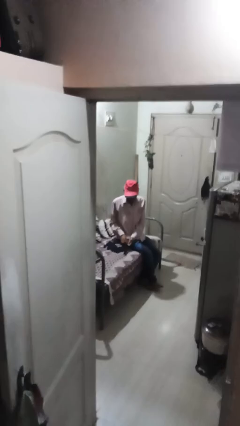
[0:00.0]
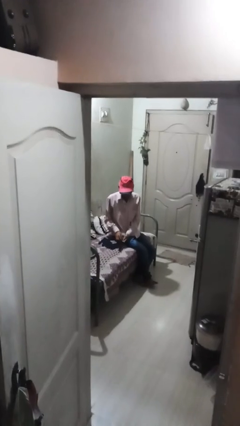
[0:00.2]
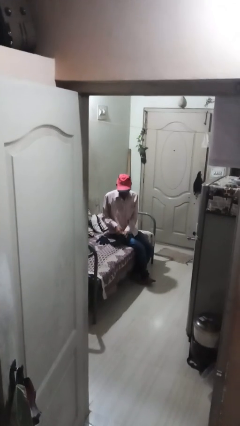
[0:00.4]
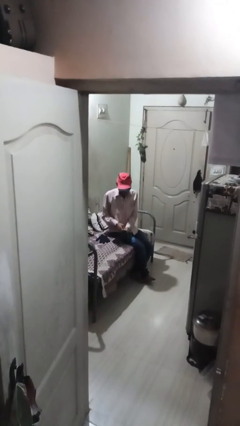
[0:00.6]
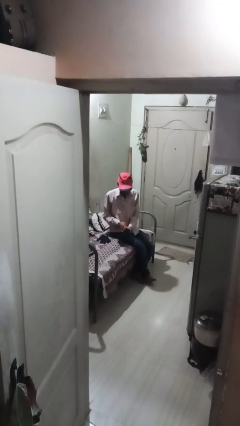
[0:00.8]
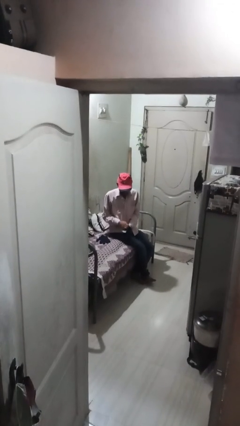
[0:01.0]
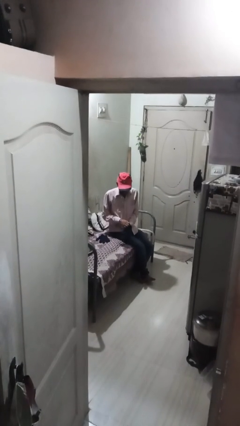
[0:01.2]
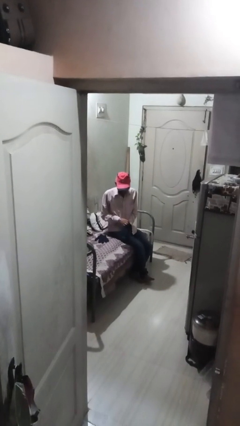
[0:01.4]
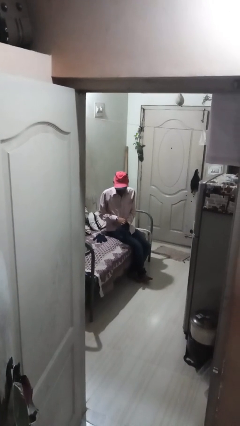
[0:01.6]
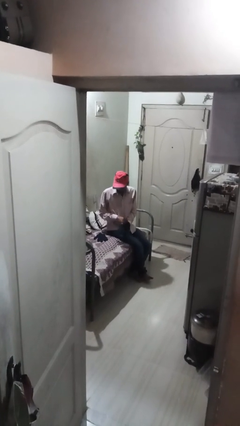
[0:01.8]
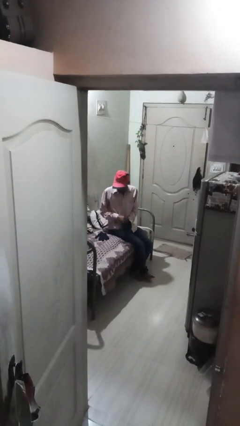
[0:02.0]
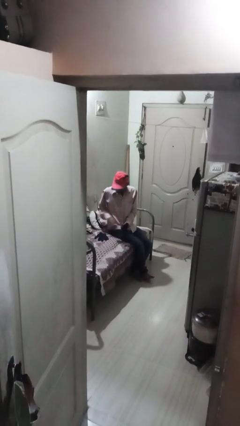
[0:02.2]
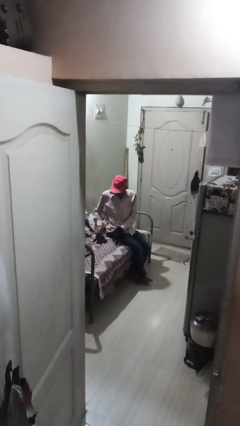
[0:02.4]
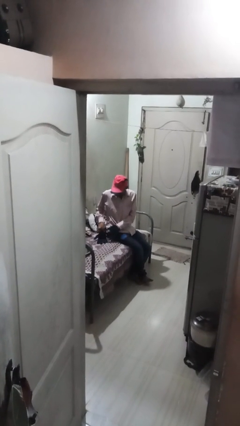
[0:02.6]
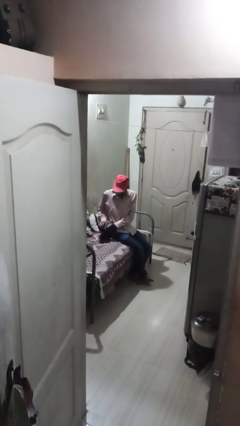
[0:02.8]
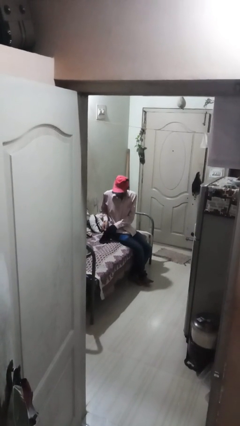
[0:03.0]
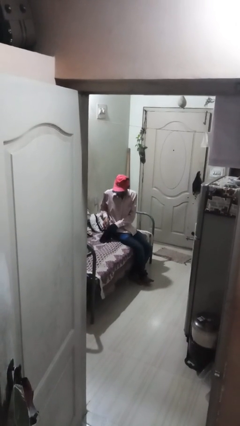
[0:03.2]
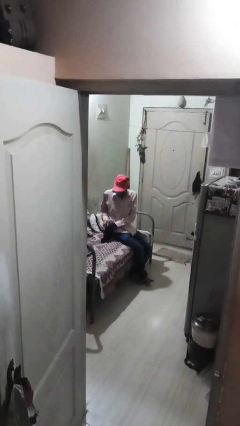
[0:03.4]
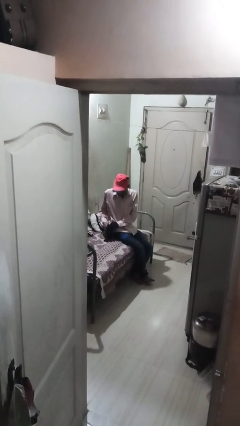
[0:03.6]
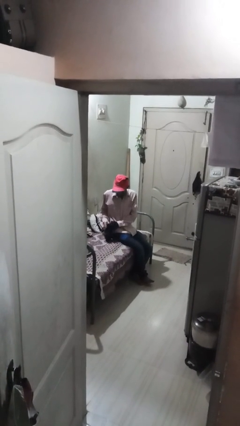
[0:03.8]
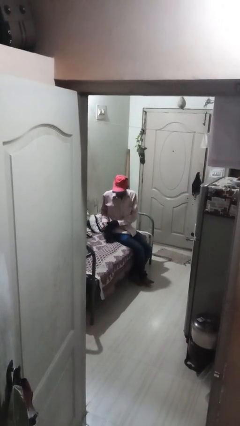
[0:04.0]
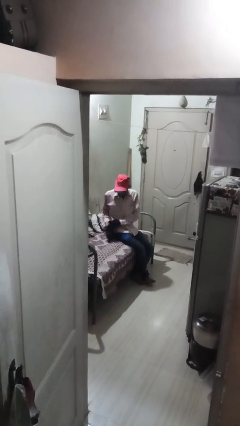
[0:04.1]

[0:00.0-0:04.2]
person puts on gloves

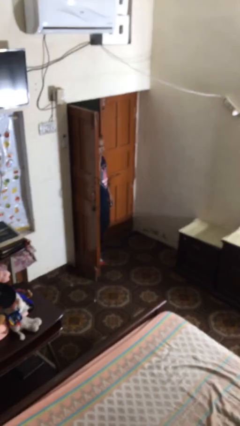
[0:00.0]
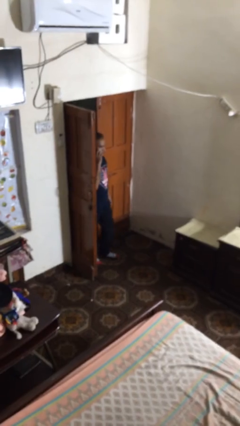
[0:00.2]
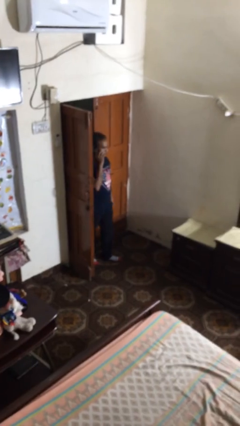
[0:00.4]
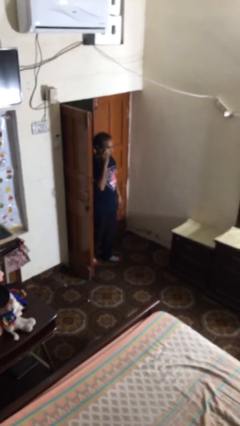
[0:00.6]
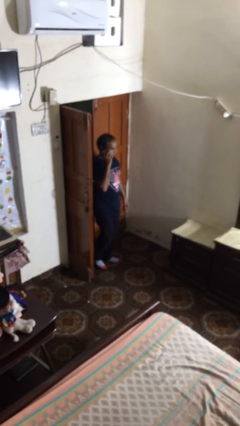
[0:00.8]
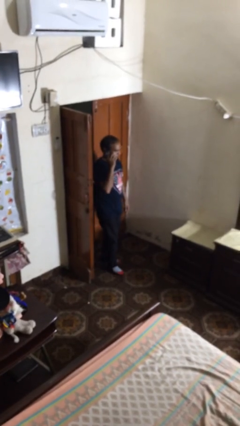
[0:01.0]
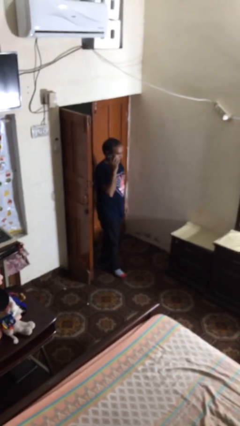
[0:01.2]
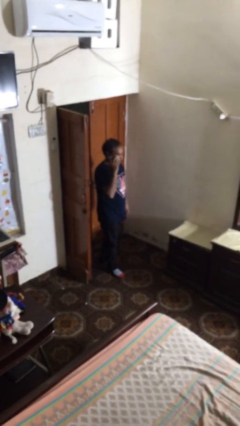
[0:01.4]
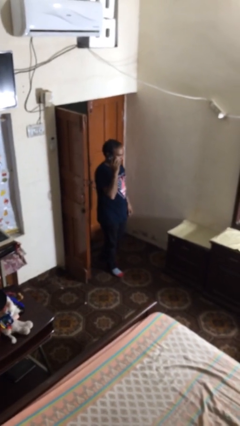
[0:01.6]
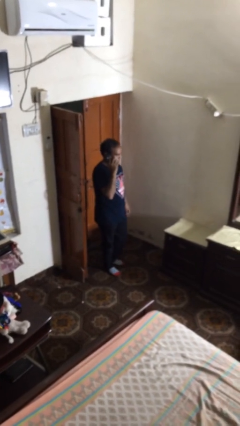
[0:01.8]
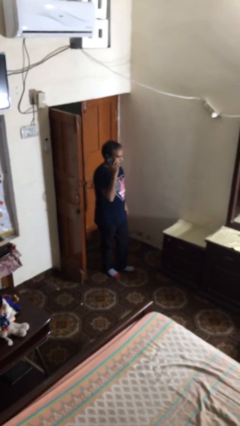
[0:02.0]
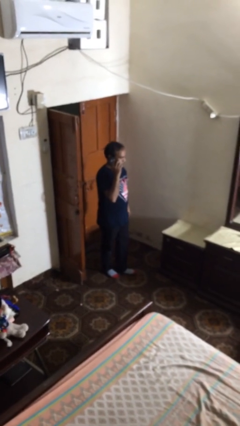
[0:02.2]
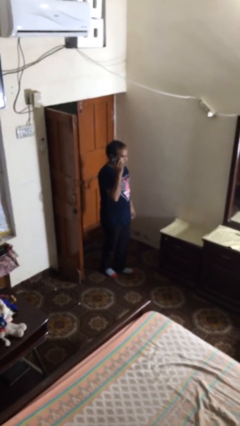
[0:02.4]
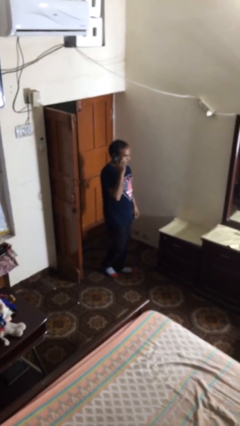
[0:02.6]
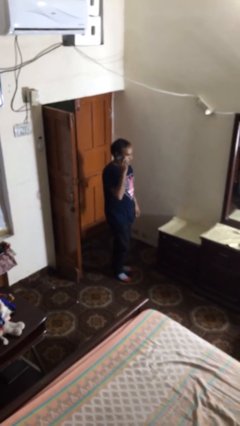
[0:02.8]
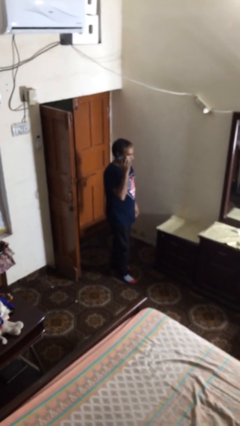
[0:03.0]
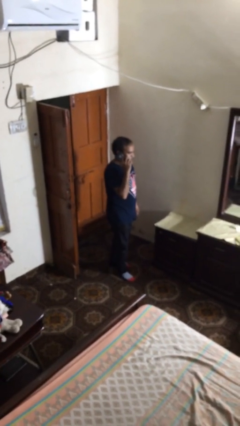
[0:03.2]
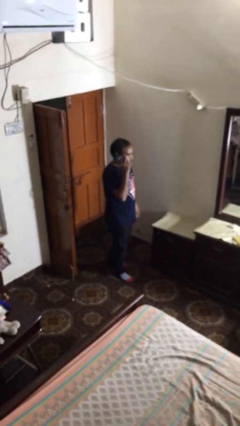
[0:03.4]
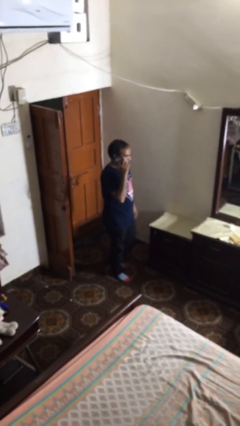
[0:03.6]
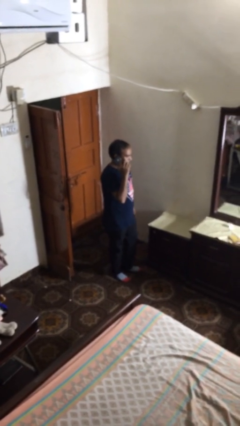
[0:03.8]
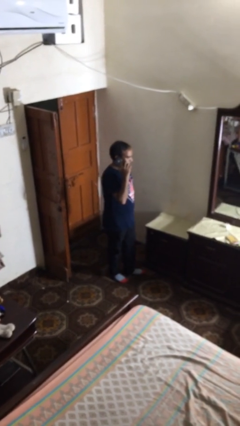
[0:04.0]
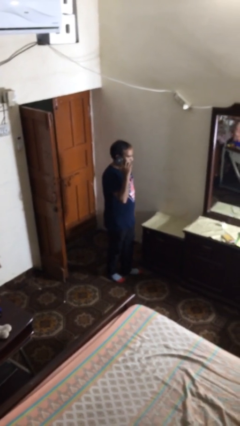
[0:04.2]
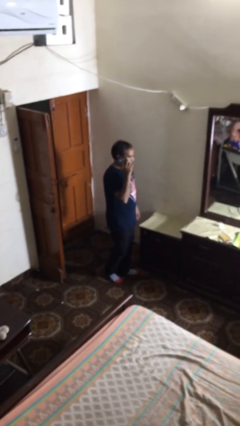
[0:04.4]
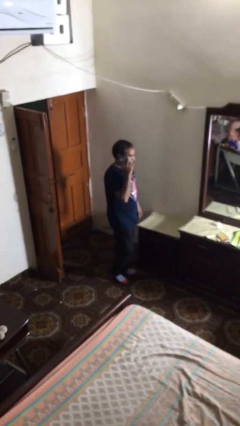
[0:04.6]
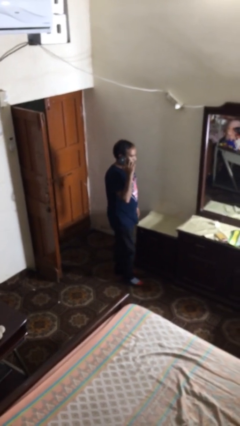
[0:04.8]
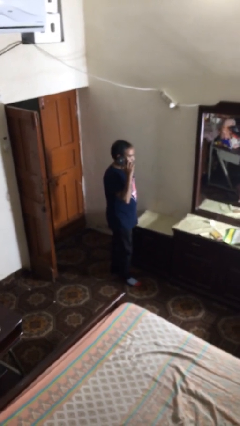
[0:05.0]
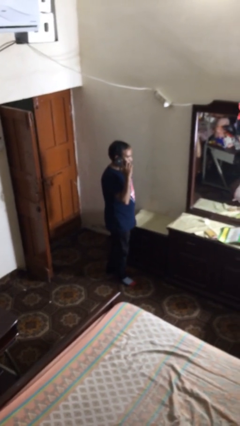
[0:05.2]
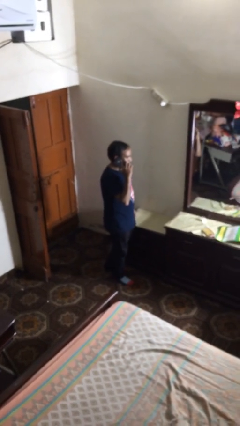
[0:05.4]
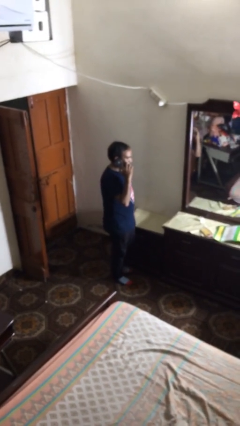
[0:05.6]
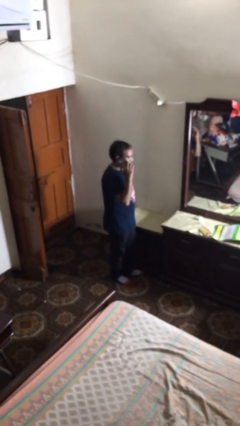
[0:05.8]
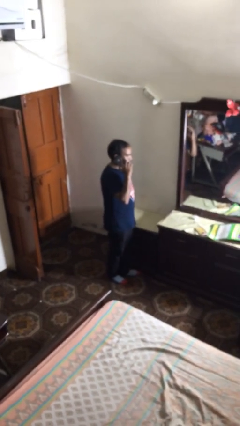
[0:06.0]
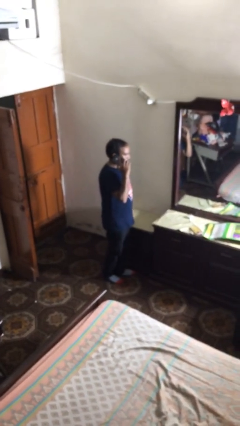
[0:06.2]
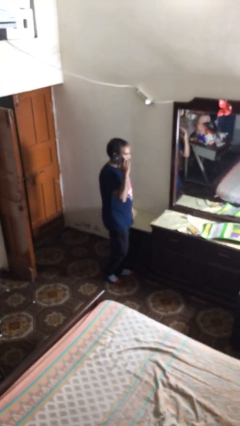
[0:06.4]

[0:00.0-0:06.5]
person enters scene through structure

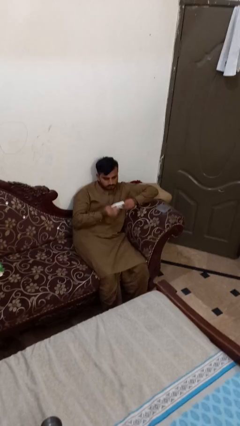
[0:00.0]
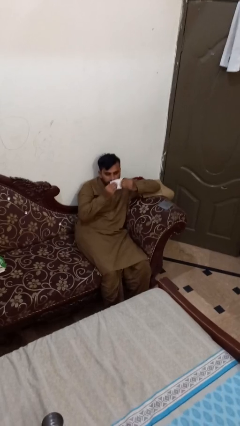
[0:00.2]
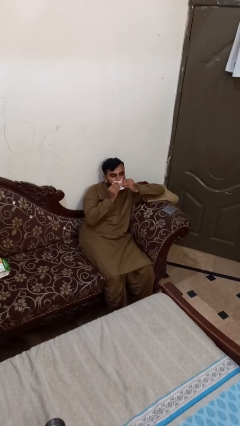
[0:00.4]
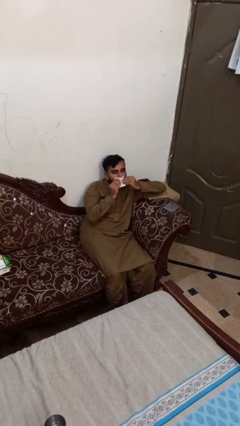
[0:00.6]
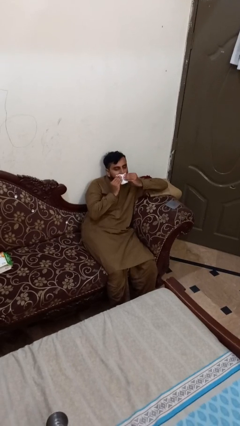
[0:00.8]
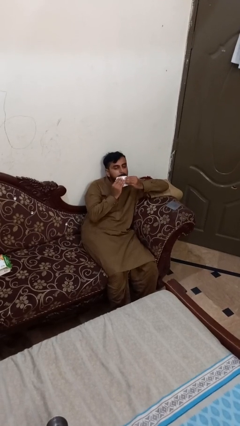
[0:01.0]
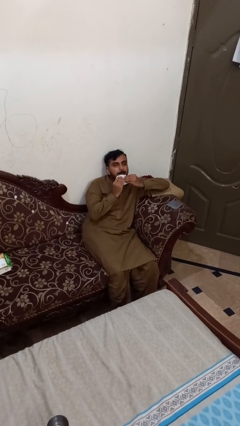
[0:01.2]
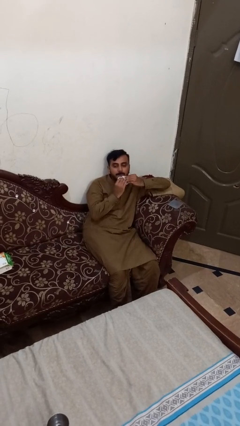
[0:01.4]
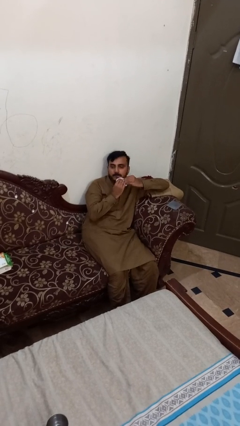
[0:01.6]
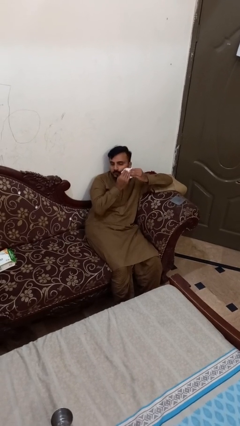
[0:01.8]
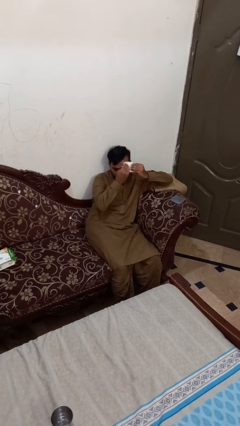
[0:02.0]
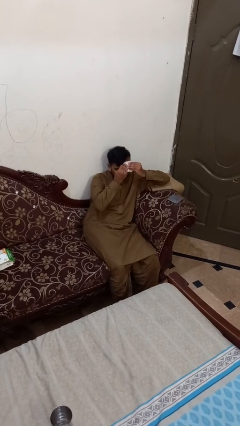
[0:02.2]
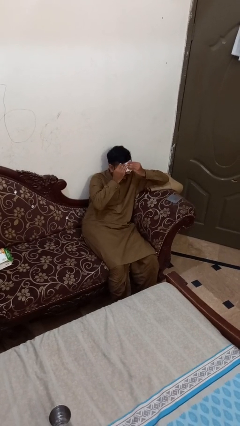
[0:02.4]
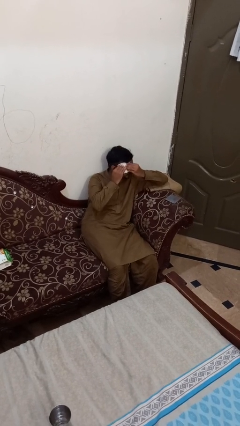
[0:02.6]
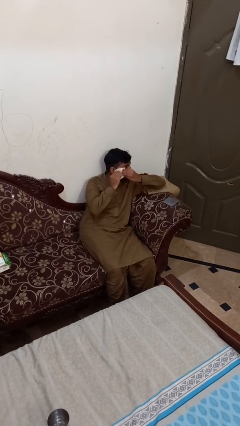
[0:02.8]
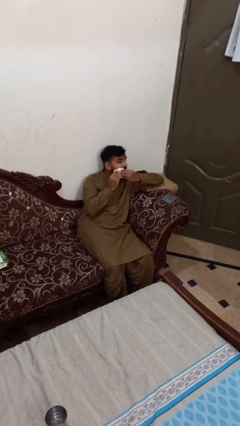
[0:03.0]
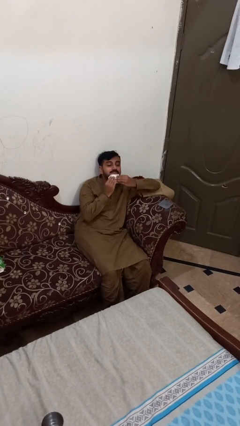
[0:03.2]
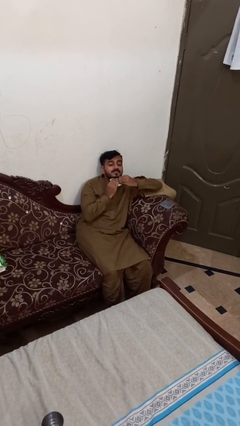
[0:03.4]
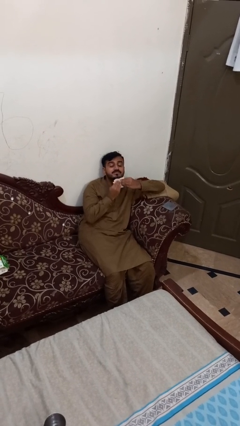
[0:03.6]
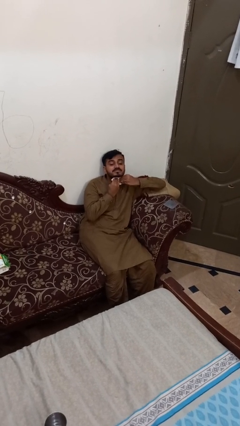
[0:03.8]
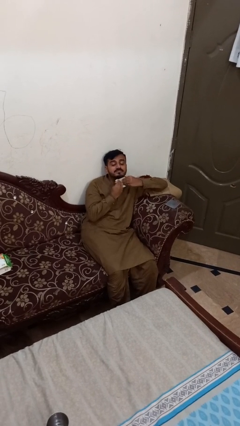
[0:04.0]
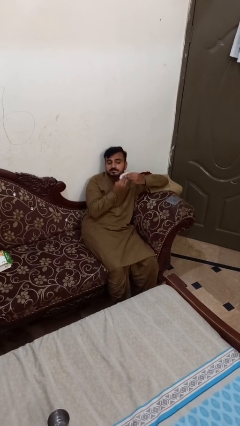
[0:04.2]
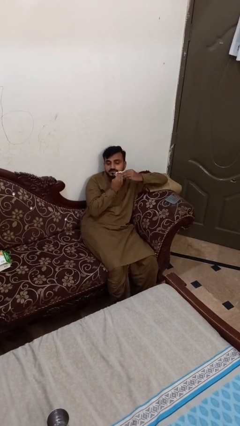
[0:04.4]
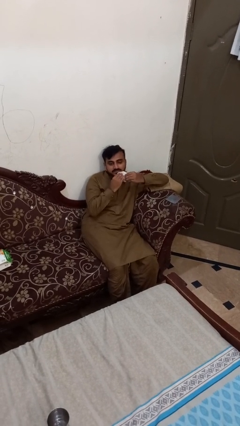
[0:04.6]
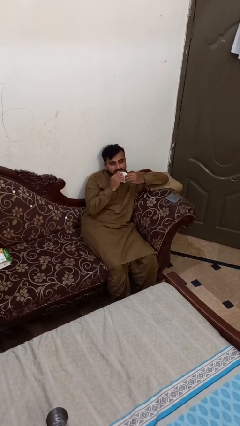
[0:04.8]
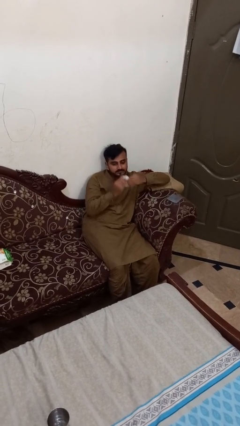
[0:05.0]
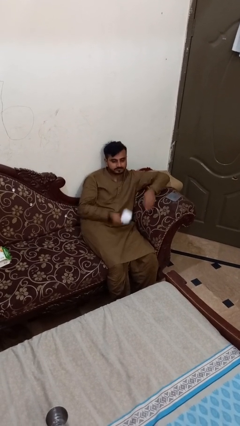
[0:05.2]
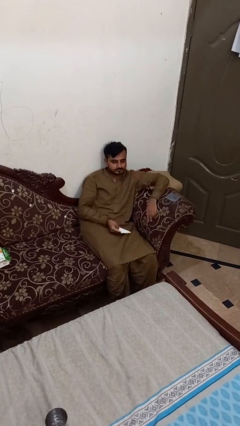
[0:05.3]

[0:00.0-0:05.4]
person wipes mouth with napkin

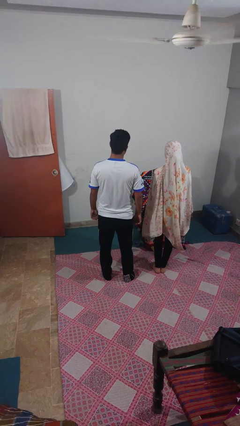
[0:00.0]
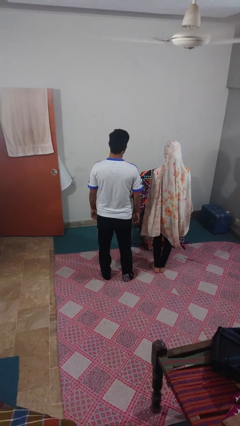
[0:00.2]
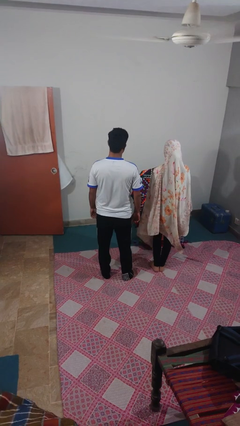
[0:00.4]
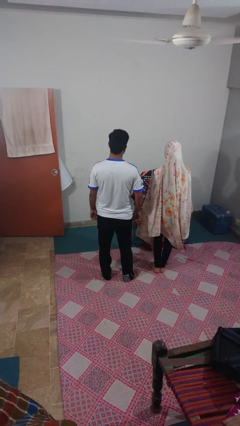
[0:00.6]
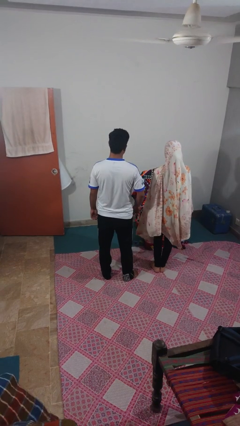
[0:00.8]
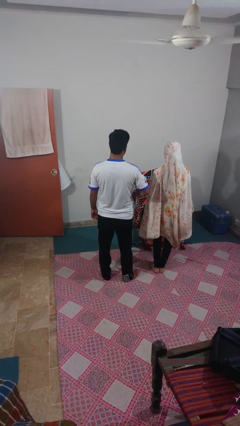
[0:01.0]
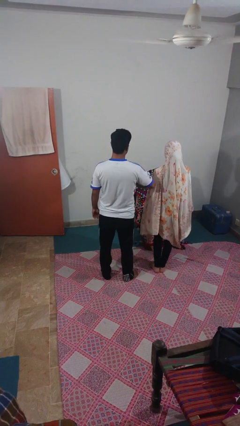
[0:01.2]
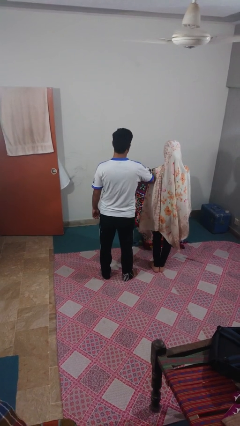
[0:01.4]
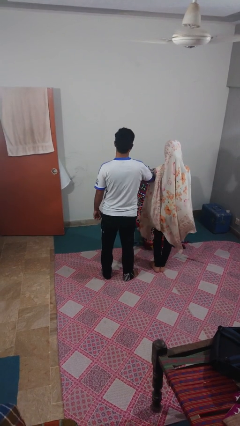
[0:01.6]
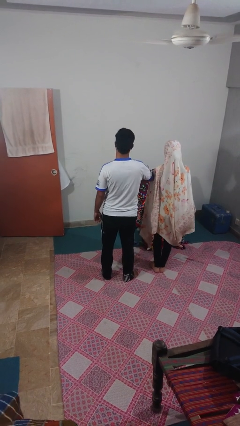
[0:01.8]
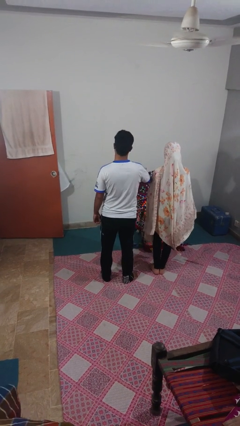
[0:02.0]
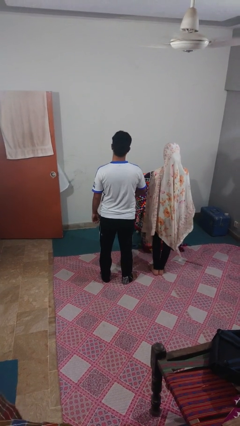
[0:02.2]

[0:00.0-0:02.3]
person nudges person with elbow
